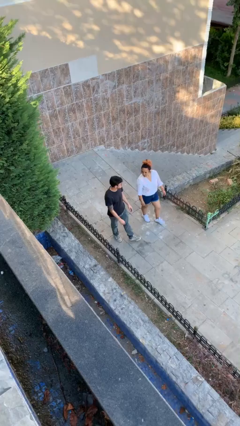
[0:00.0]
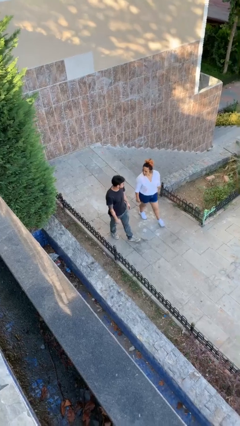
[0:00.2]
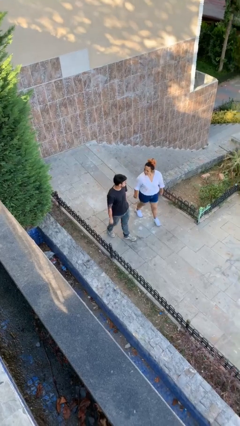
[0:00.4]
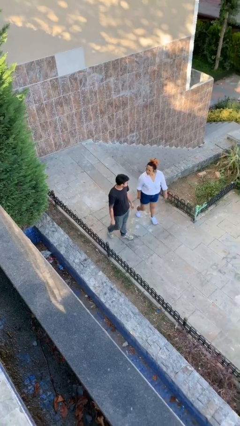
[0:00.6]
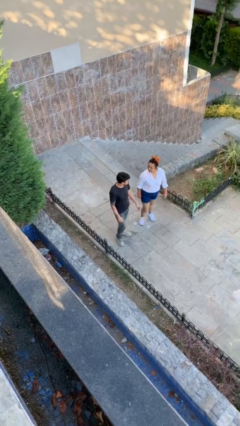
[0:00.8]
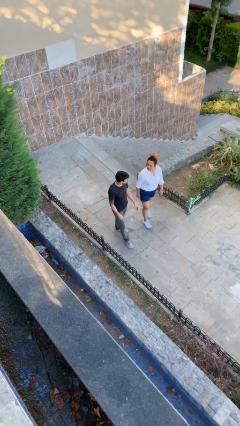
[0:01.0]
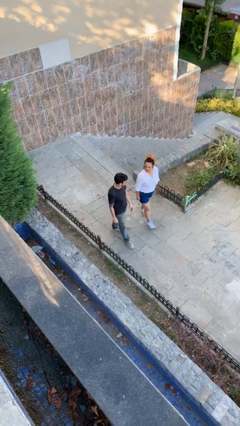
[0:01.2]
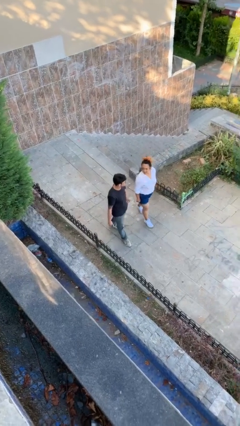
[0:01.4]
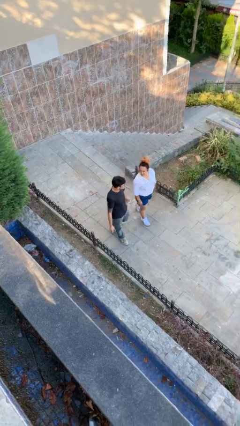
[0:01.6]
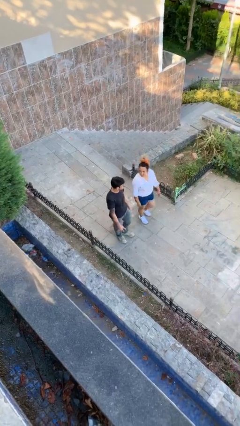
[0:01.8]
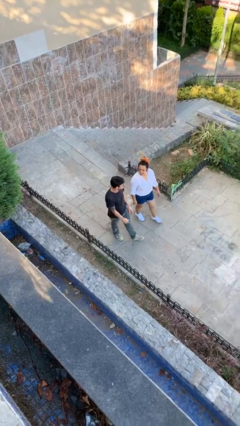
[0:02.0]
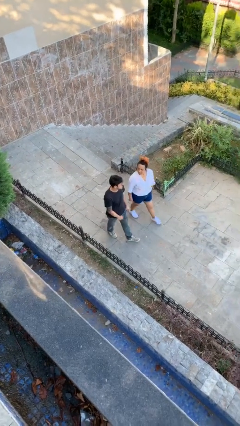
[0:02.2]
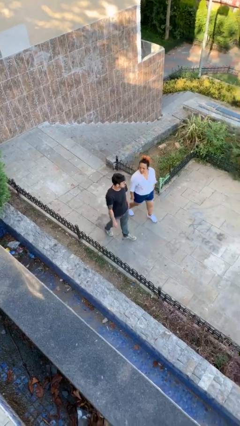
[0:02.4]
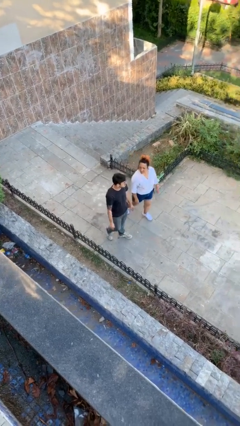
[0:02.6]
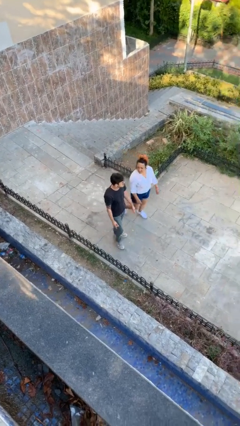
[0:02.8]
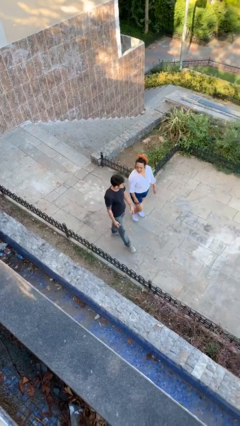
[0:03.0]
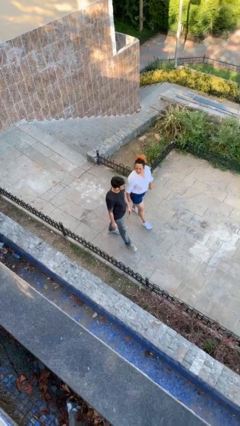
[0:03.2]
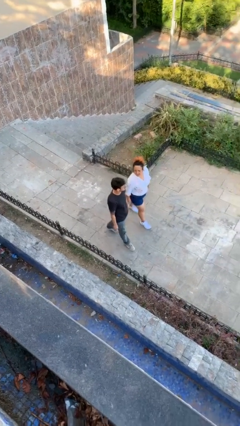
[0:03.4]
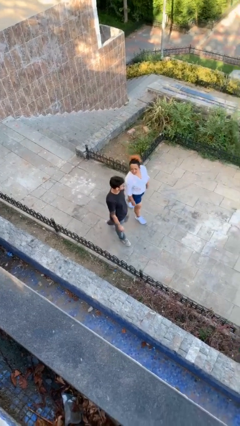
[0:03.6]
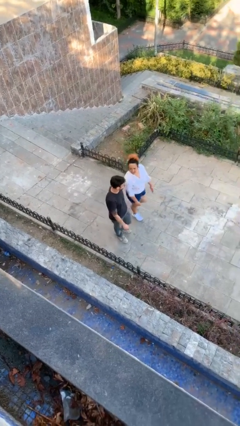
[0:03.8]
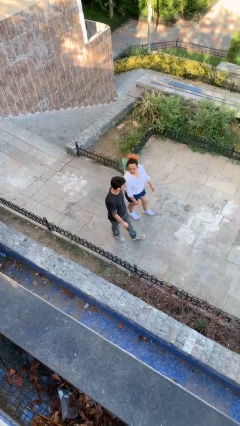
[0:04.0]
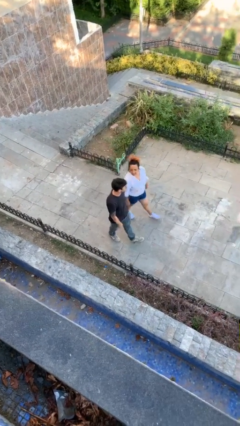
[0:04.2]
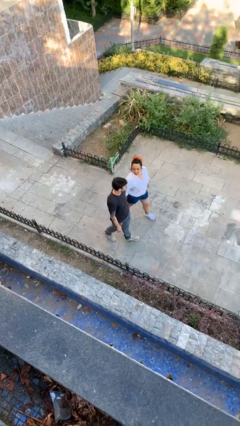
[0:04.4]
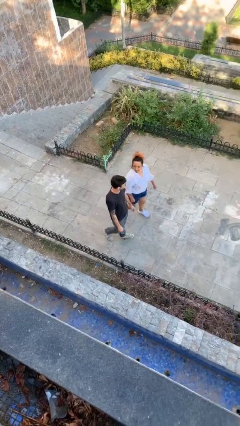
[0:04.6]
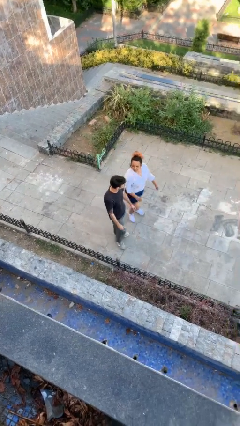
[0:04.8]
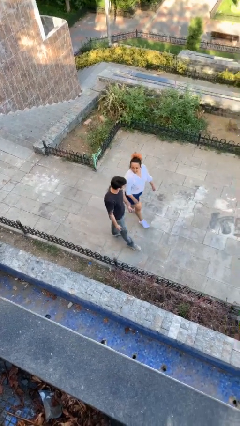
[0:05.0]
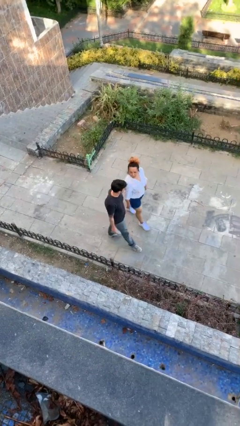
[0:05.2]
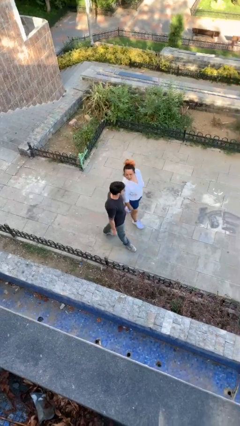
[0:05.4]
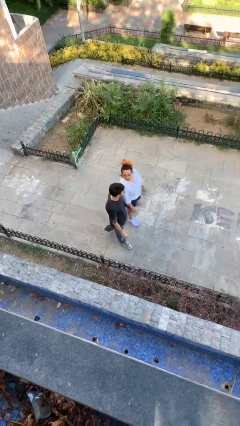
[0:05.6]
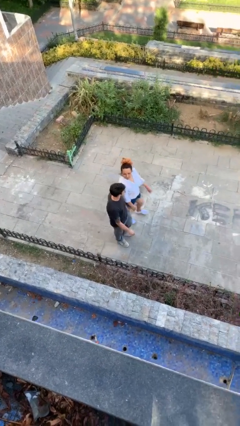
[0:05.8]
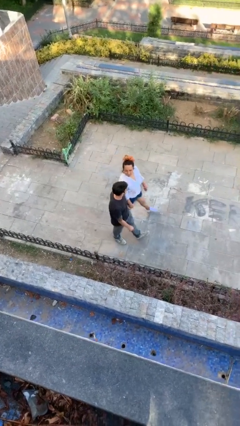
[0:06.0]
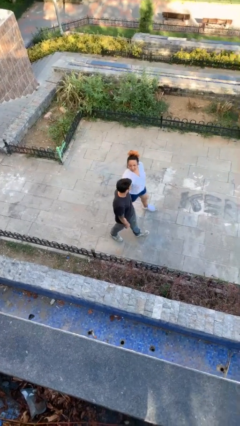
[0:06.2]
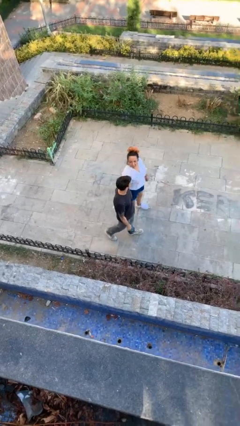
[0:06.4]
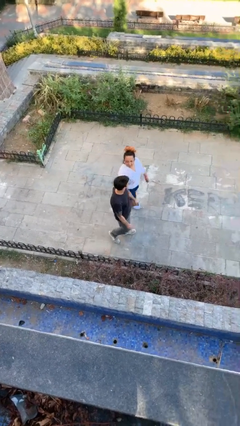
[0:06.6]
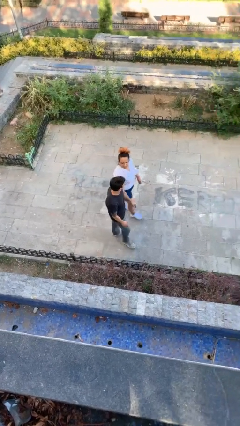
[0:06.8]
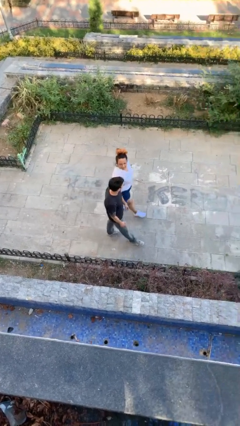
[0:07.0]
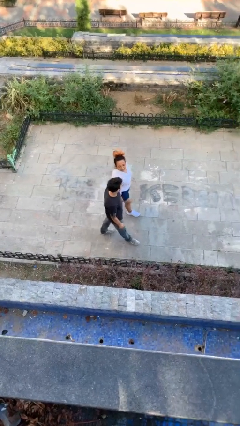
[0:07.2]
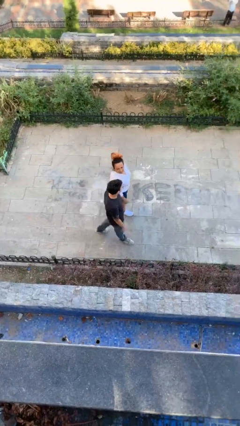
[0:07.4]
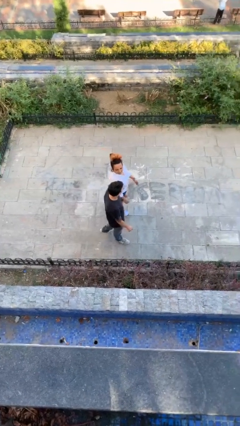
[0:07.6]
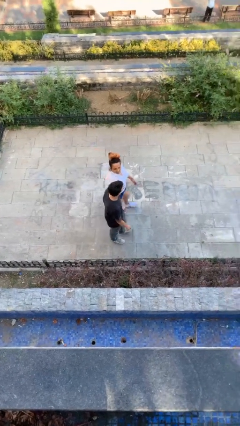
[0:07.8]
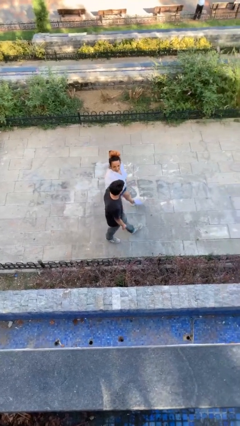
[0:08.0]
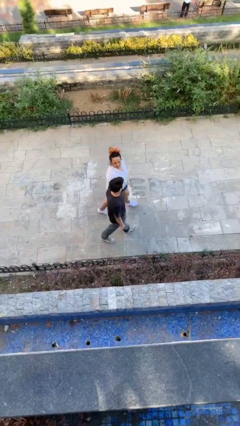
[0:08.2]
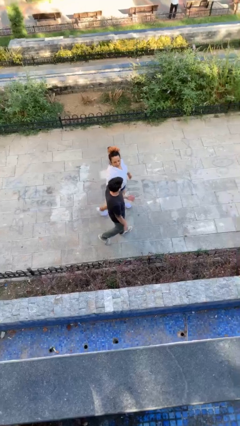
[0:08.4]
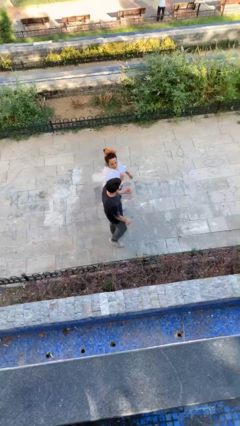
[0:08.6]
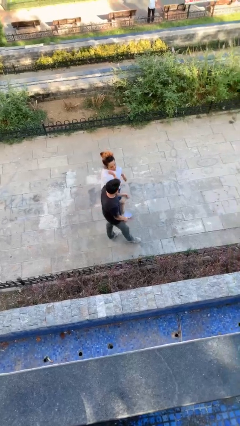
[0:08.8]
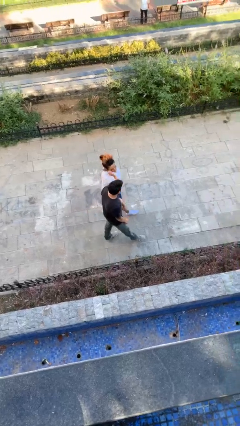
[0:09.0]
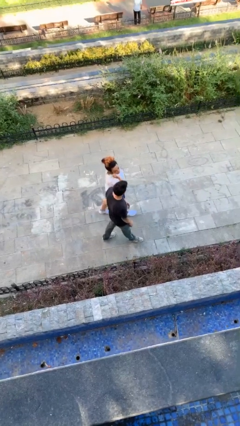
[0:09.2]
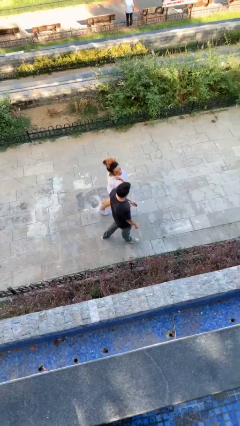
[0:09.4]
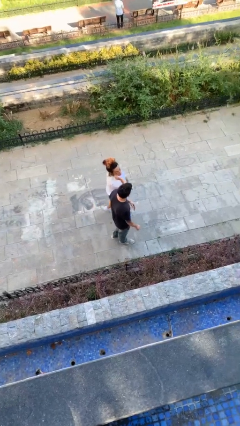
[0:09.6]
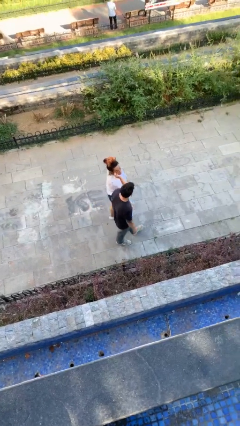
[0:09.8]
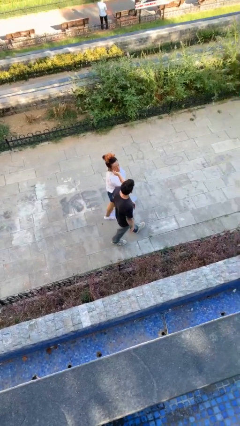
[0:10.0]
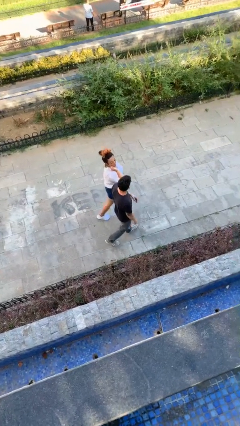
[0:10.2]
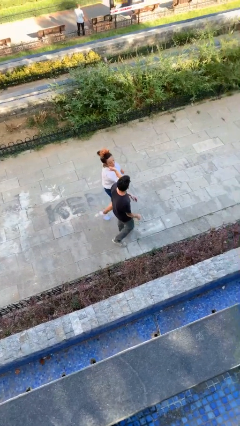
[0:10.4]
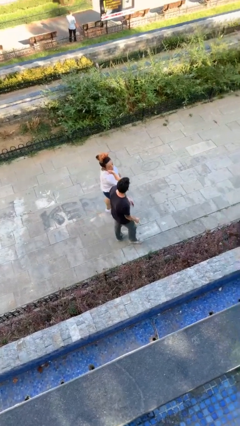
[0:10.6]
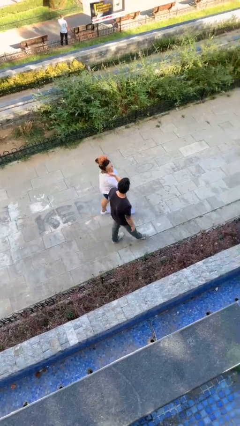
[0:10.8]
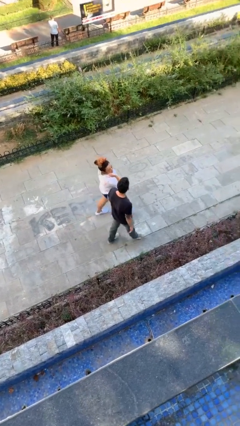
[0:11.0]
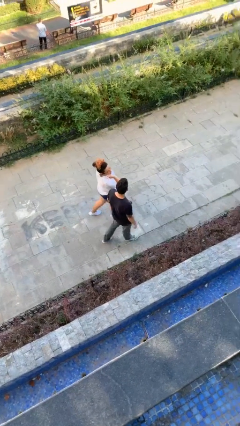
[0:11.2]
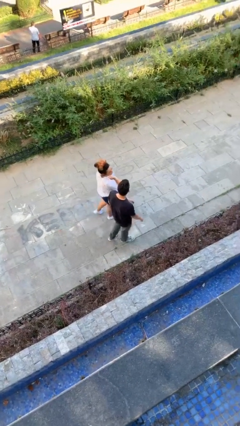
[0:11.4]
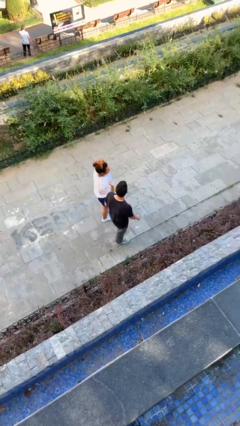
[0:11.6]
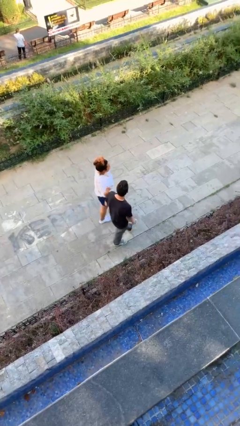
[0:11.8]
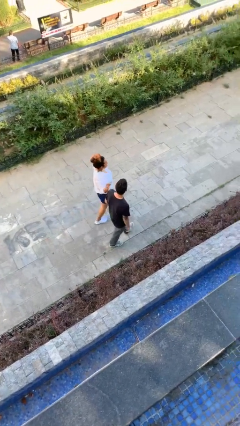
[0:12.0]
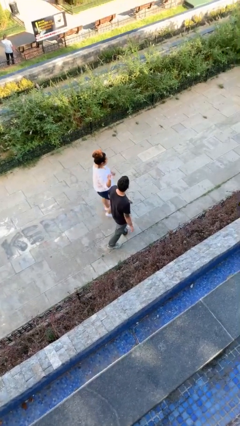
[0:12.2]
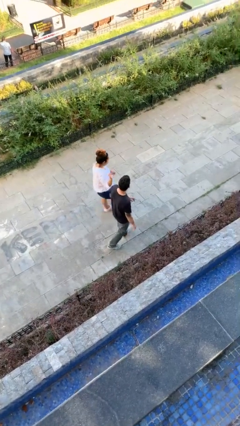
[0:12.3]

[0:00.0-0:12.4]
person talks to person

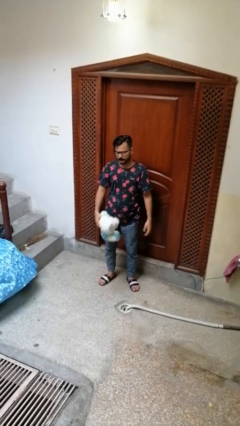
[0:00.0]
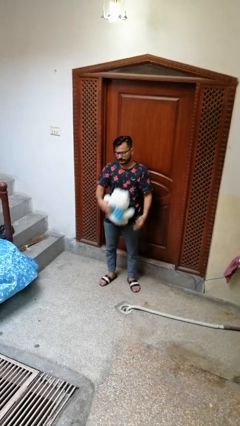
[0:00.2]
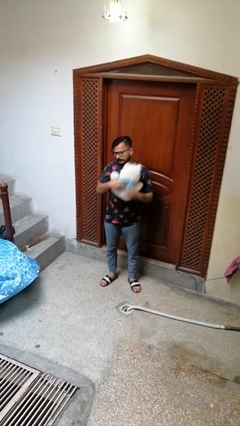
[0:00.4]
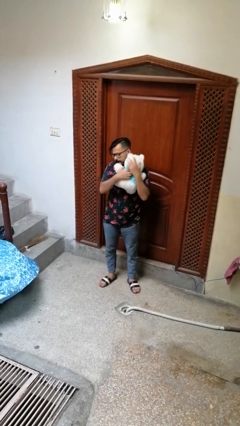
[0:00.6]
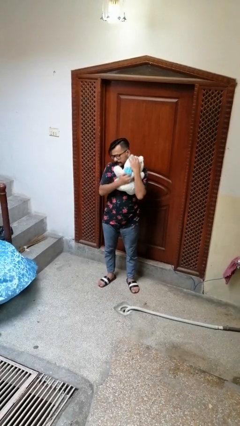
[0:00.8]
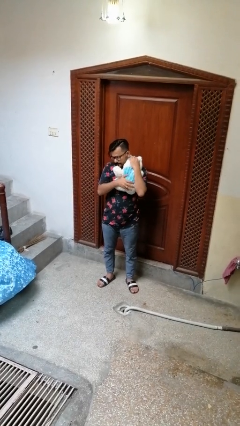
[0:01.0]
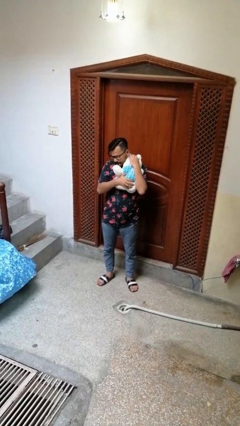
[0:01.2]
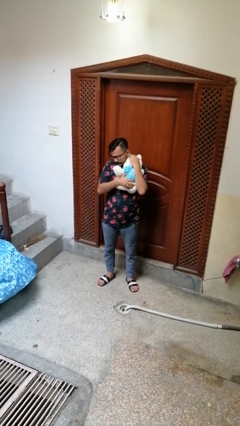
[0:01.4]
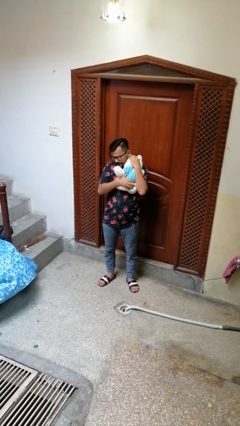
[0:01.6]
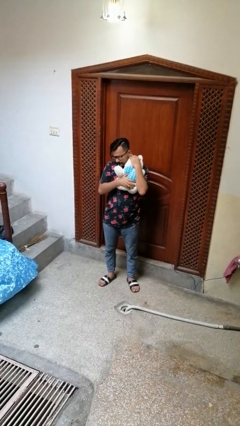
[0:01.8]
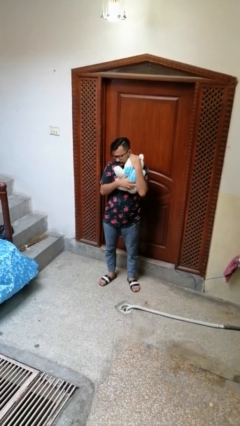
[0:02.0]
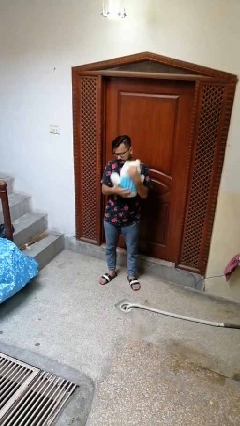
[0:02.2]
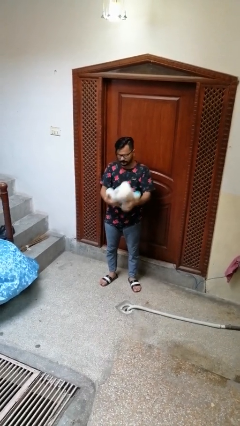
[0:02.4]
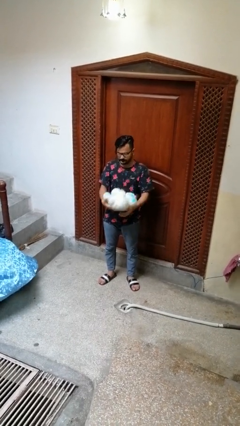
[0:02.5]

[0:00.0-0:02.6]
person hugs stuffed animal

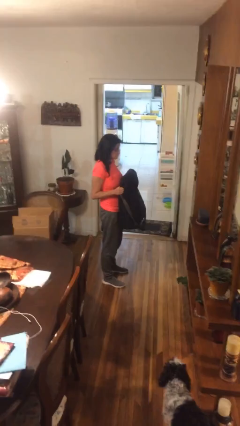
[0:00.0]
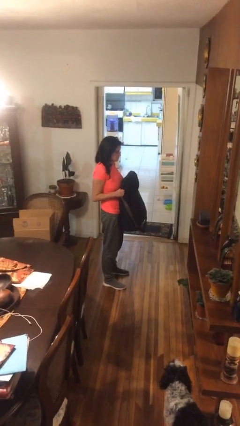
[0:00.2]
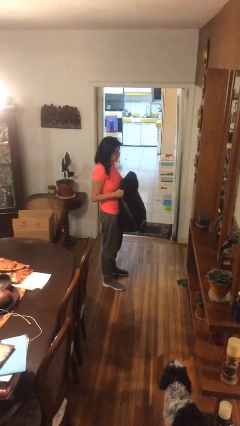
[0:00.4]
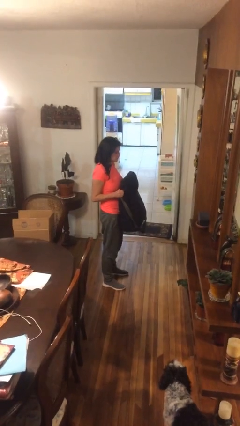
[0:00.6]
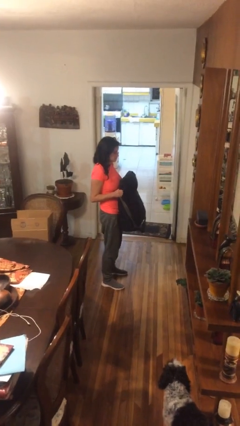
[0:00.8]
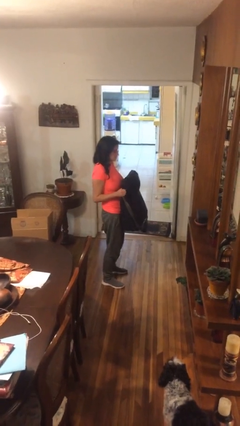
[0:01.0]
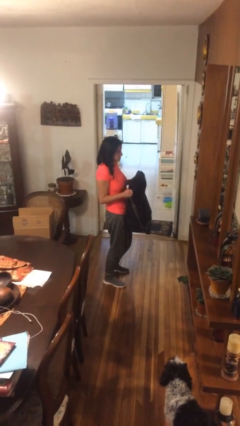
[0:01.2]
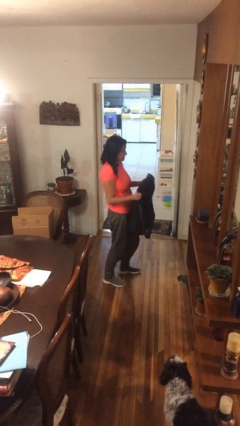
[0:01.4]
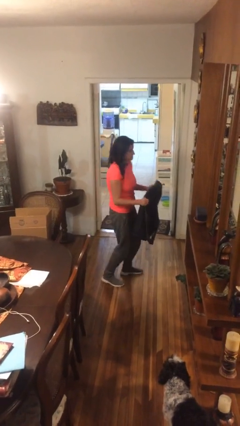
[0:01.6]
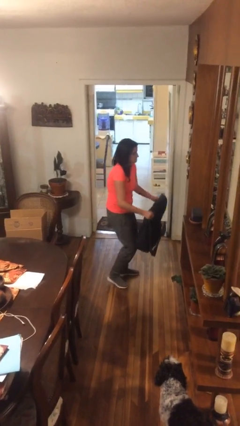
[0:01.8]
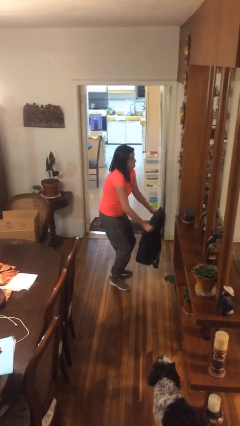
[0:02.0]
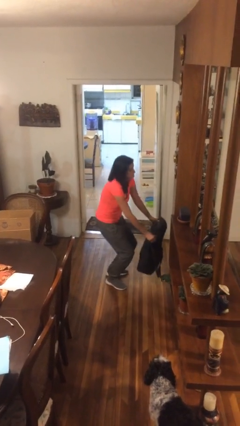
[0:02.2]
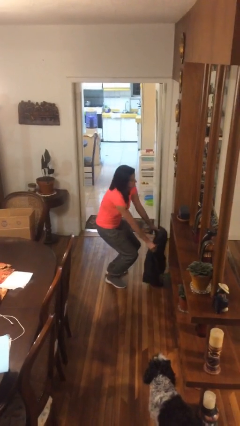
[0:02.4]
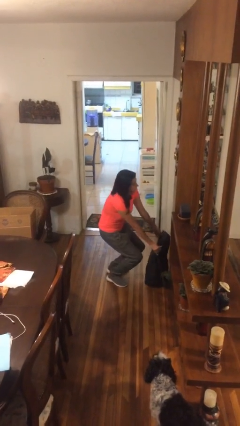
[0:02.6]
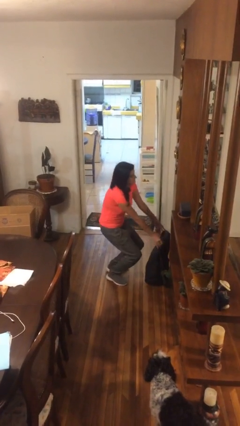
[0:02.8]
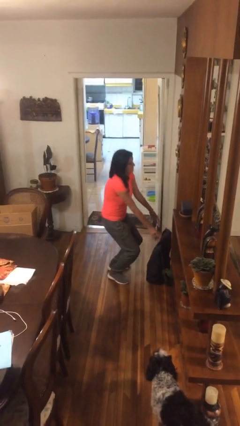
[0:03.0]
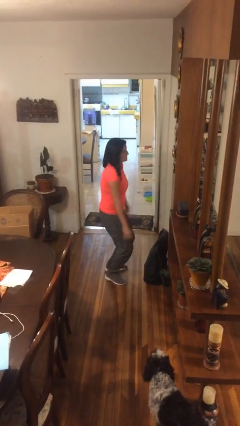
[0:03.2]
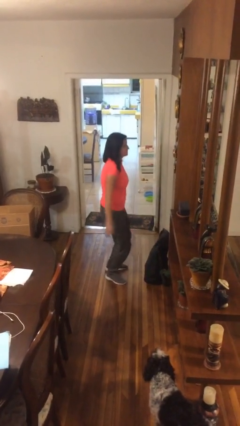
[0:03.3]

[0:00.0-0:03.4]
person puts down object on floor
